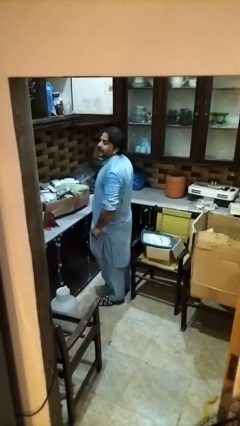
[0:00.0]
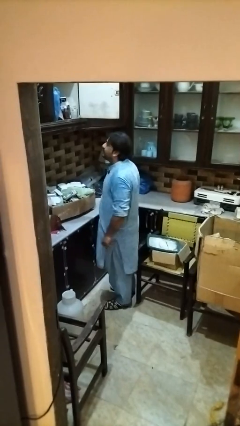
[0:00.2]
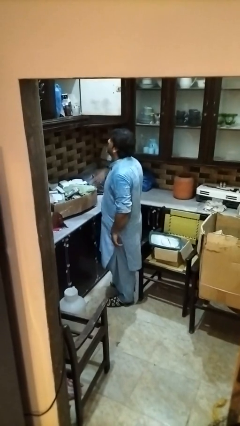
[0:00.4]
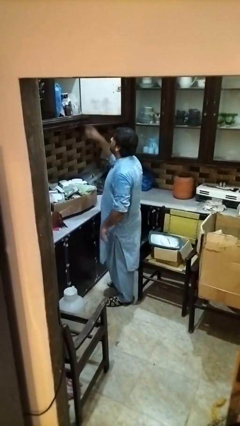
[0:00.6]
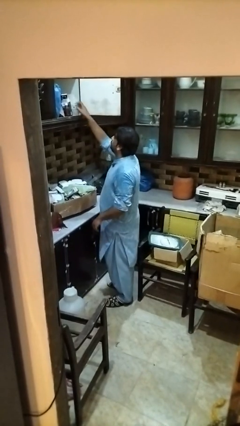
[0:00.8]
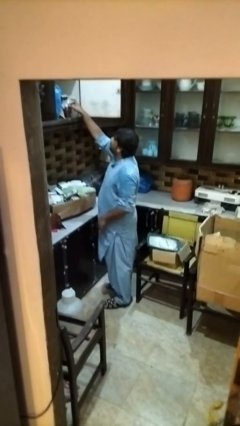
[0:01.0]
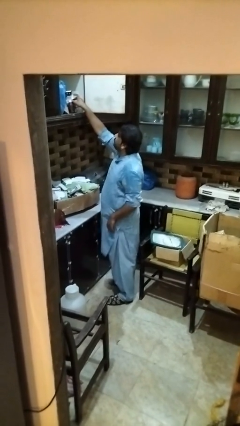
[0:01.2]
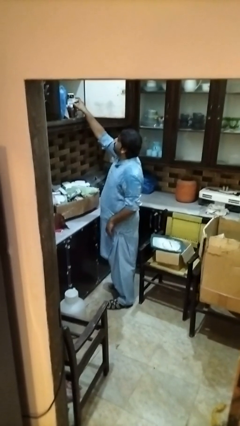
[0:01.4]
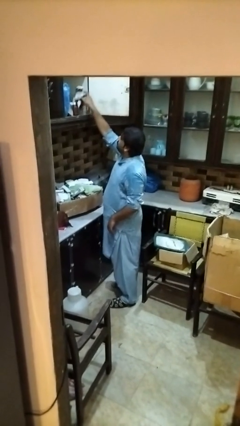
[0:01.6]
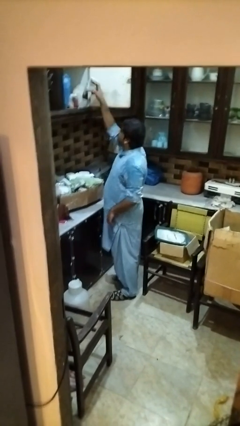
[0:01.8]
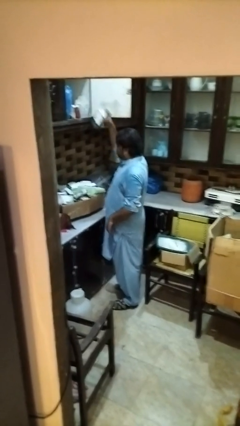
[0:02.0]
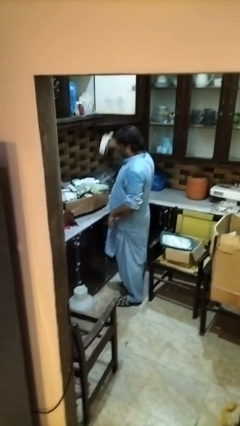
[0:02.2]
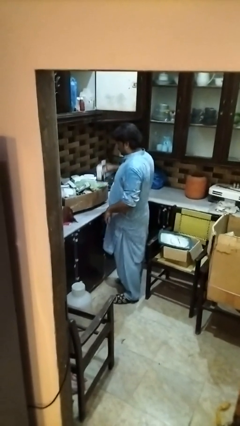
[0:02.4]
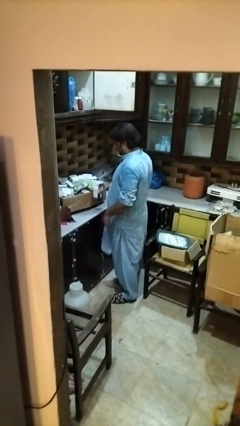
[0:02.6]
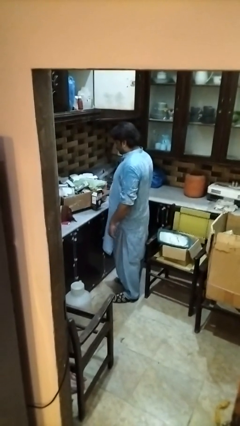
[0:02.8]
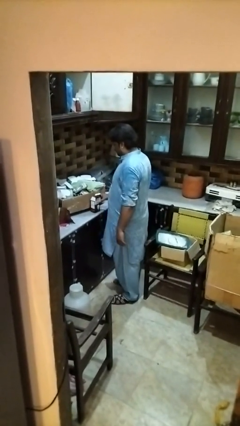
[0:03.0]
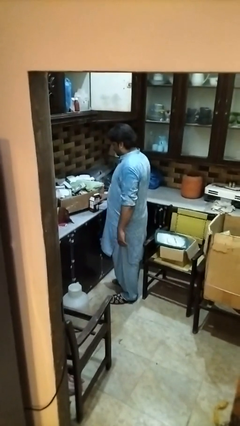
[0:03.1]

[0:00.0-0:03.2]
person takes object from cabinet

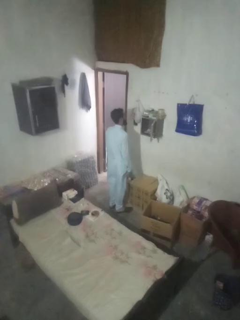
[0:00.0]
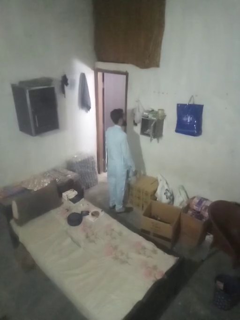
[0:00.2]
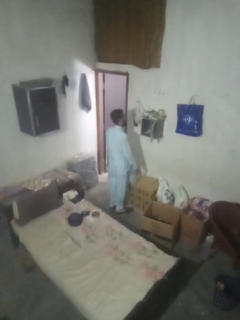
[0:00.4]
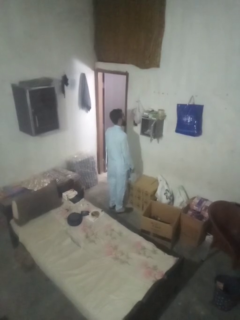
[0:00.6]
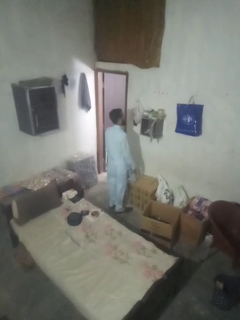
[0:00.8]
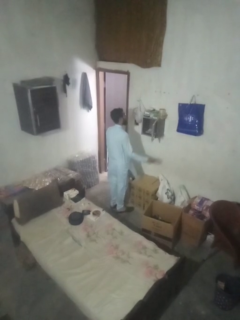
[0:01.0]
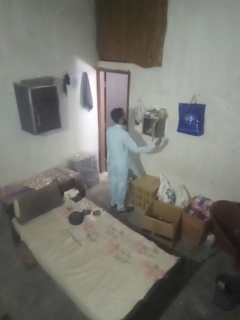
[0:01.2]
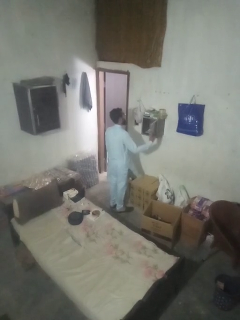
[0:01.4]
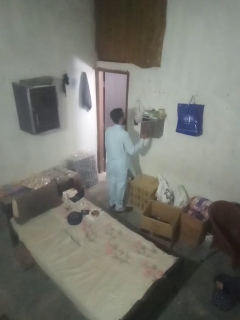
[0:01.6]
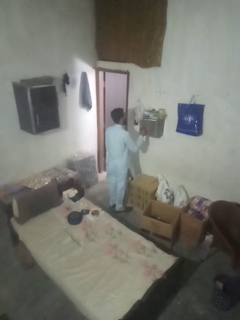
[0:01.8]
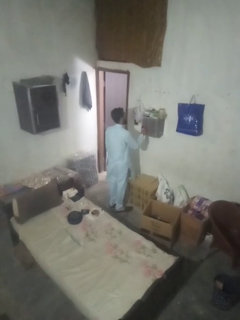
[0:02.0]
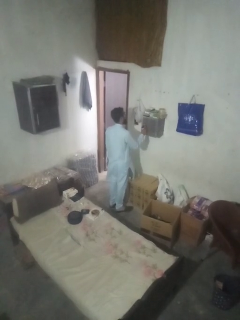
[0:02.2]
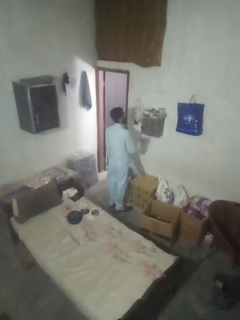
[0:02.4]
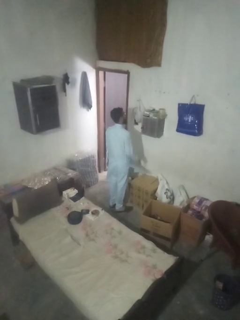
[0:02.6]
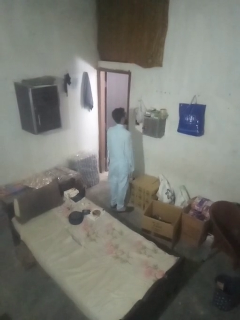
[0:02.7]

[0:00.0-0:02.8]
person closes mailbox

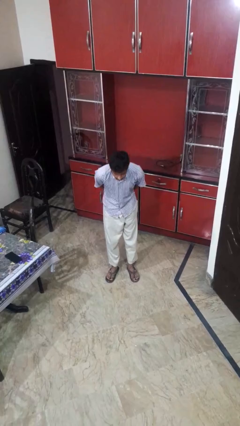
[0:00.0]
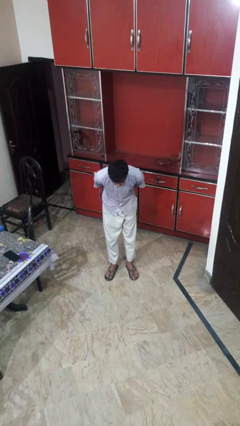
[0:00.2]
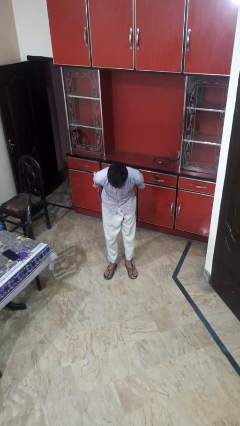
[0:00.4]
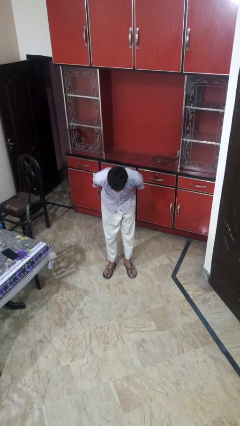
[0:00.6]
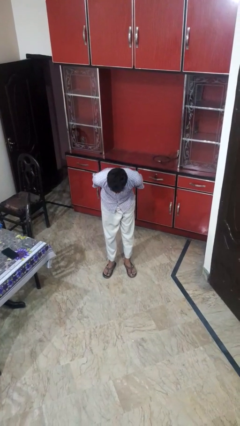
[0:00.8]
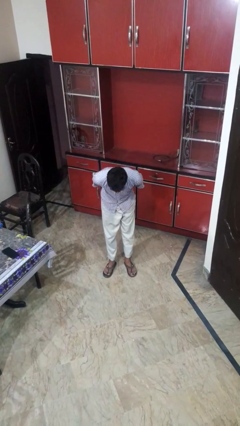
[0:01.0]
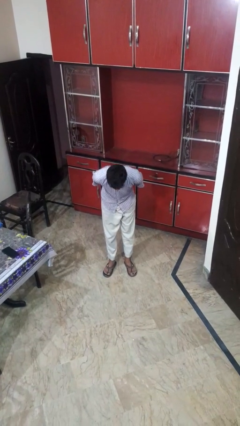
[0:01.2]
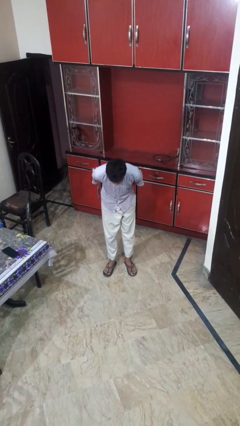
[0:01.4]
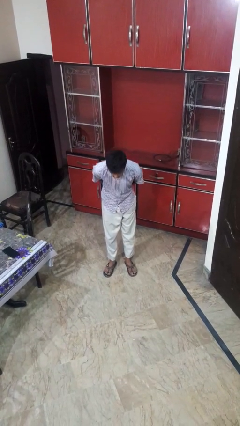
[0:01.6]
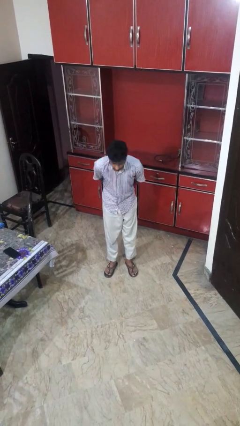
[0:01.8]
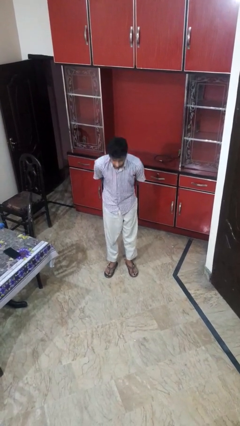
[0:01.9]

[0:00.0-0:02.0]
person bows

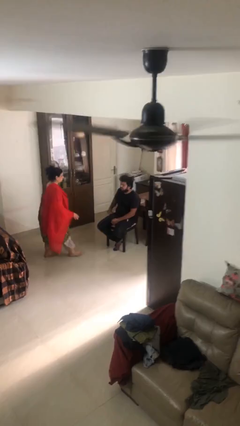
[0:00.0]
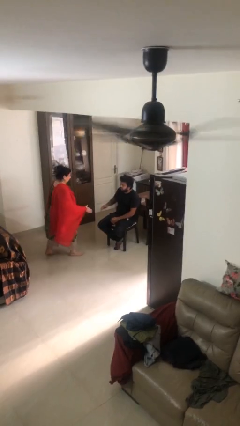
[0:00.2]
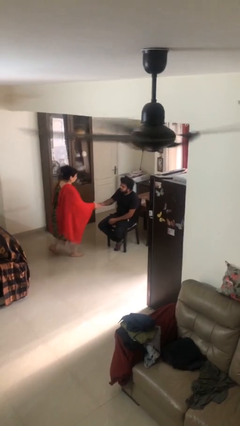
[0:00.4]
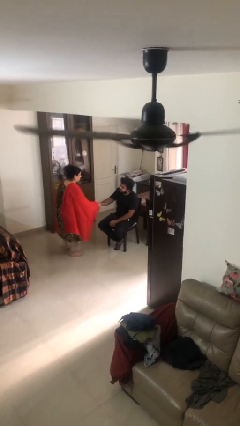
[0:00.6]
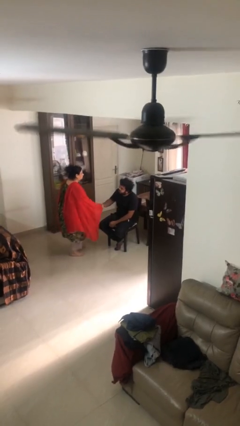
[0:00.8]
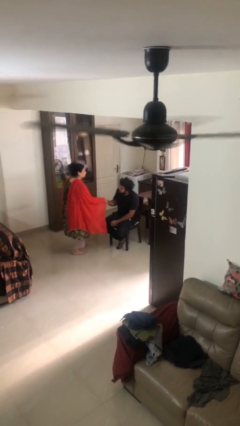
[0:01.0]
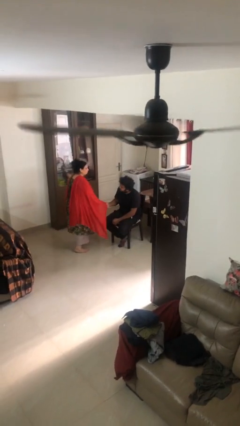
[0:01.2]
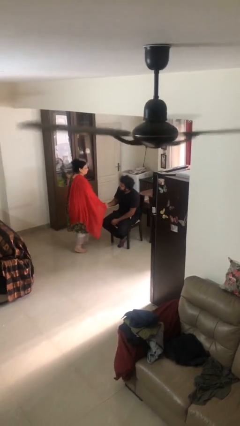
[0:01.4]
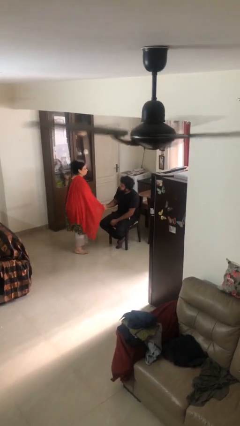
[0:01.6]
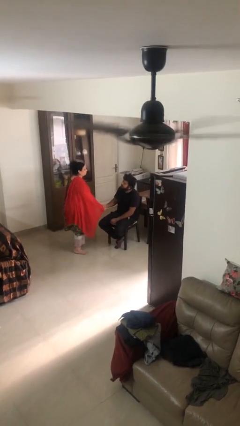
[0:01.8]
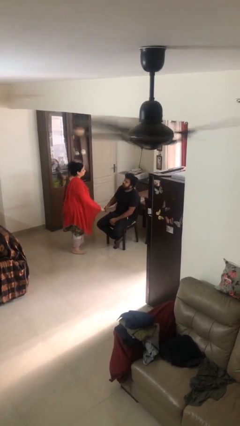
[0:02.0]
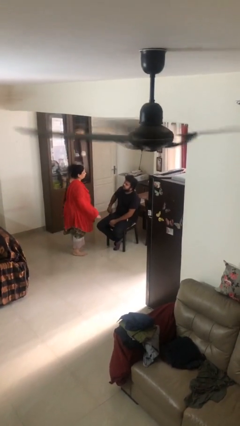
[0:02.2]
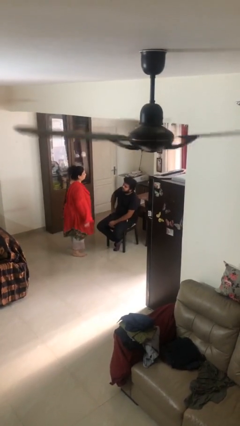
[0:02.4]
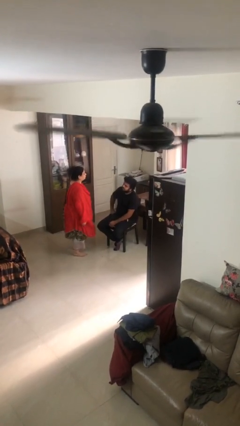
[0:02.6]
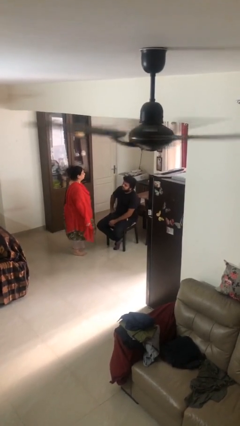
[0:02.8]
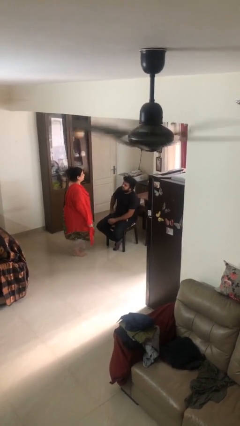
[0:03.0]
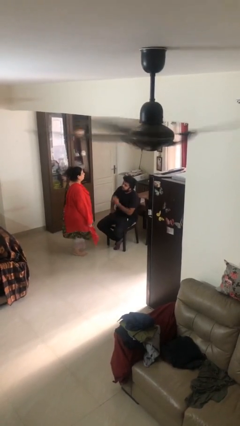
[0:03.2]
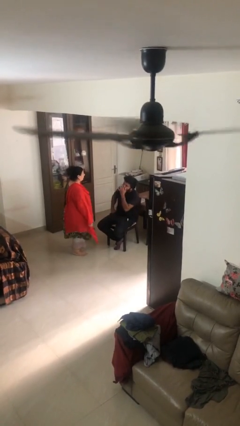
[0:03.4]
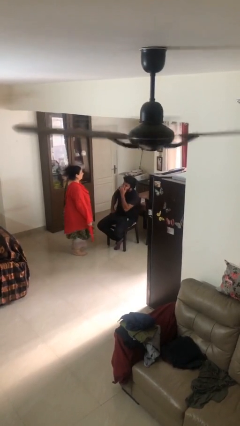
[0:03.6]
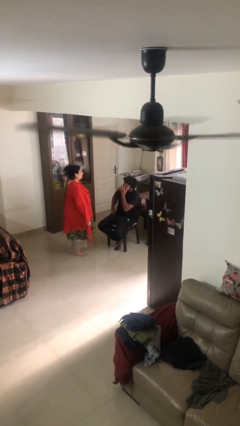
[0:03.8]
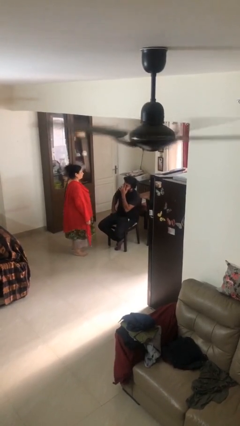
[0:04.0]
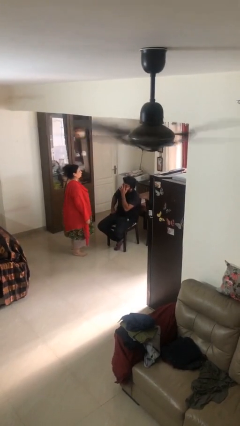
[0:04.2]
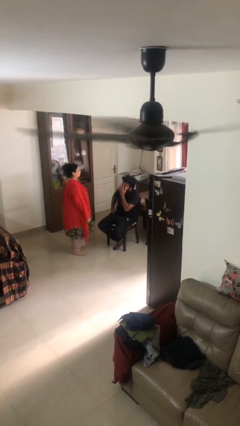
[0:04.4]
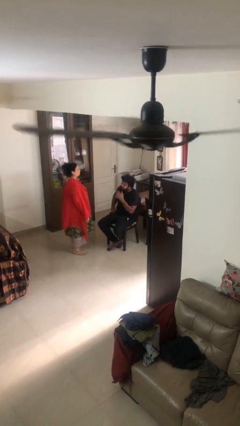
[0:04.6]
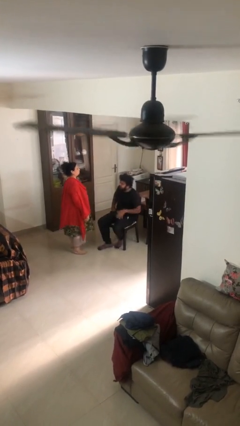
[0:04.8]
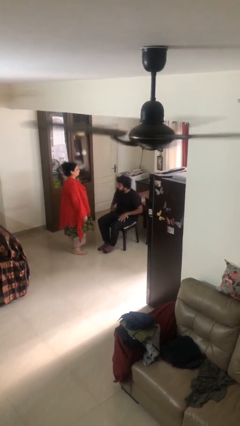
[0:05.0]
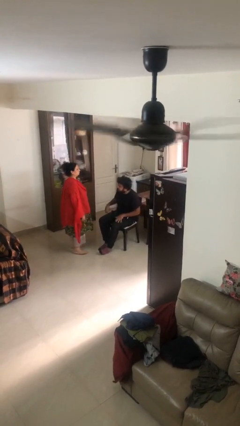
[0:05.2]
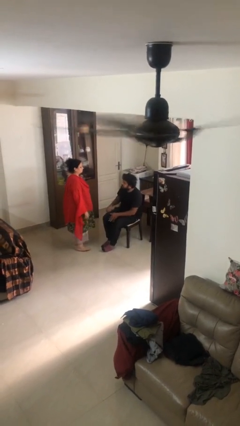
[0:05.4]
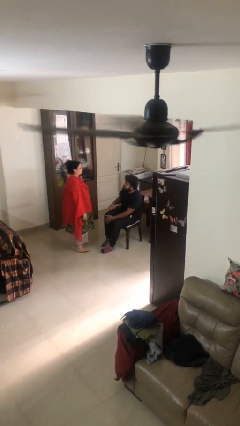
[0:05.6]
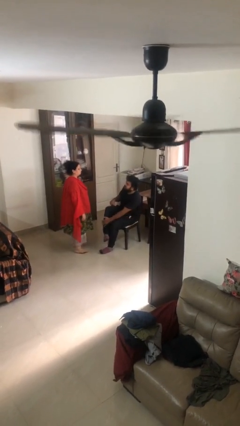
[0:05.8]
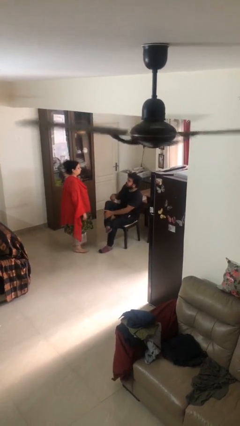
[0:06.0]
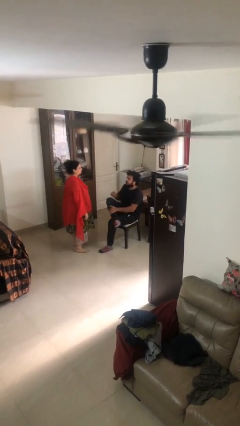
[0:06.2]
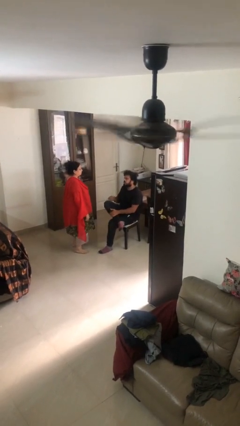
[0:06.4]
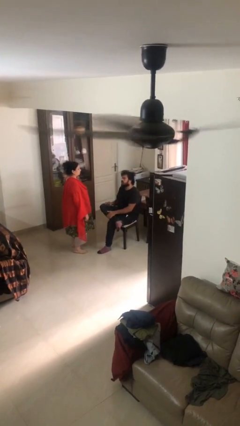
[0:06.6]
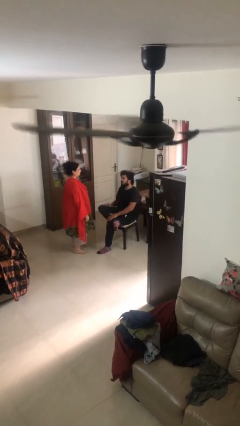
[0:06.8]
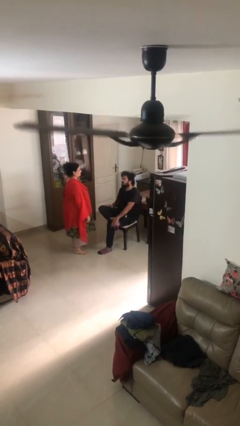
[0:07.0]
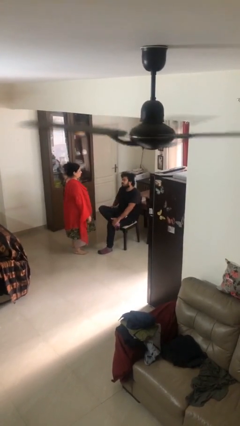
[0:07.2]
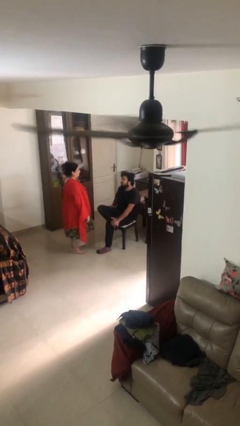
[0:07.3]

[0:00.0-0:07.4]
person shakes hand

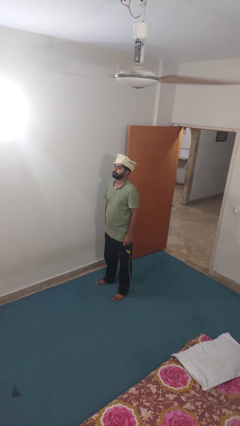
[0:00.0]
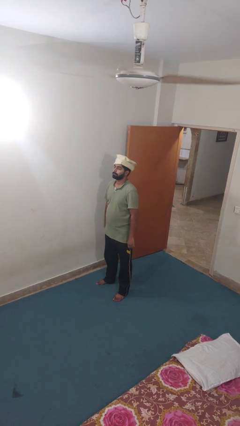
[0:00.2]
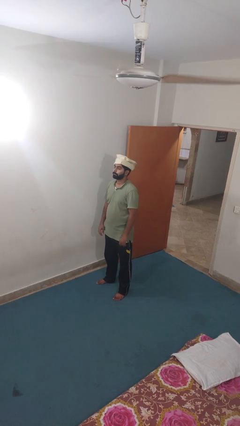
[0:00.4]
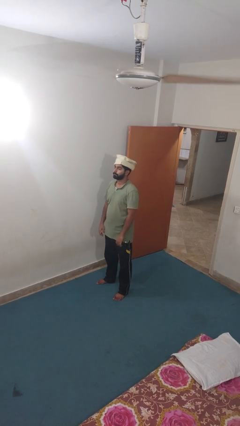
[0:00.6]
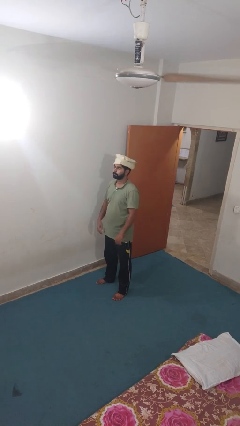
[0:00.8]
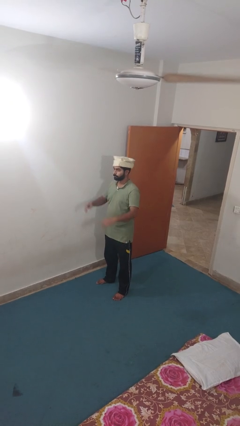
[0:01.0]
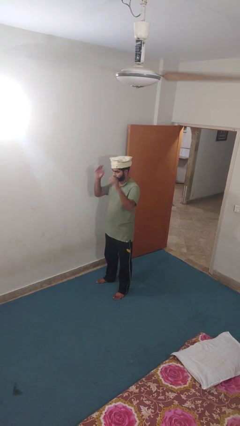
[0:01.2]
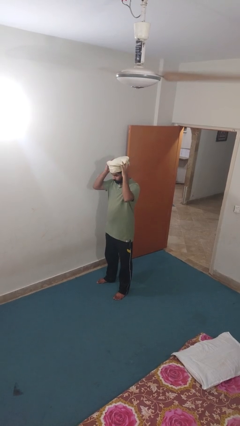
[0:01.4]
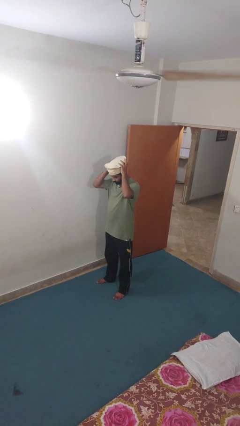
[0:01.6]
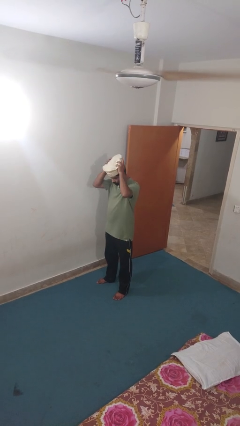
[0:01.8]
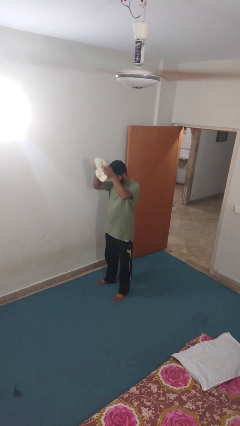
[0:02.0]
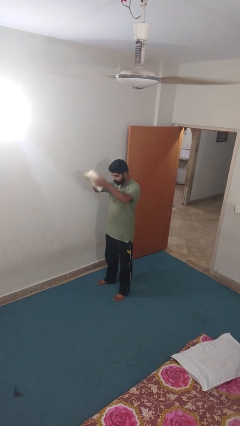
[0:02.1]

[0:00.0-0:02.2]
person takes off hat

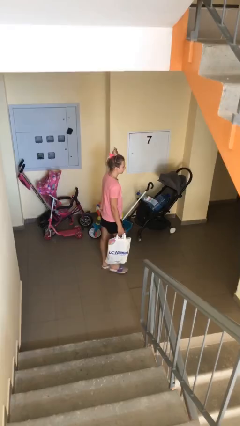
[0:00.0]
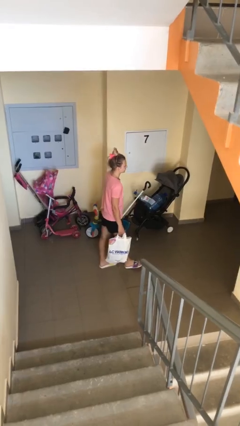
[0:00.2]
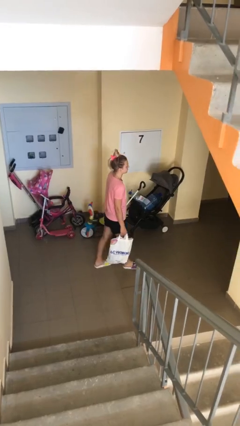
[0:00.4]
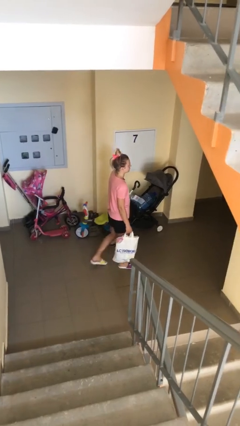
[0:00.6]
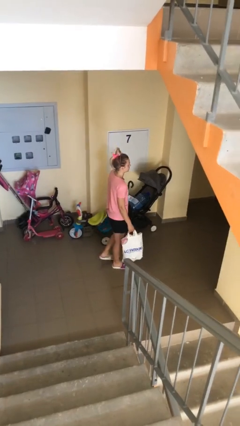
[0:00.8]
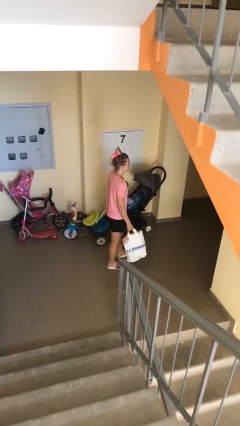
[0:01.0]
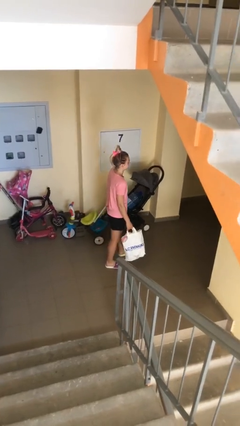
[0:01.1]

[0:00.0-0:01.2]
person carries groceries
